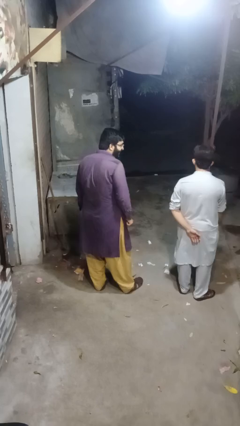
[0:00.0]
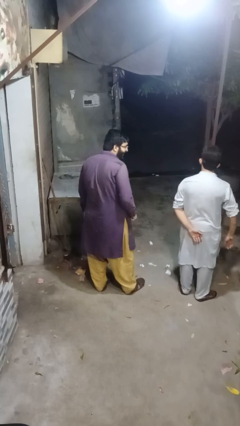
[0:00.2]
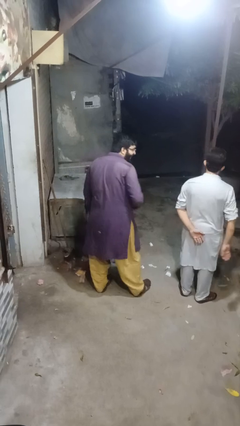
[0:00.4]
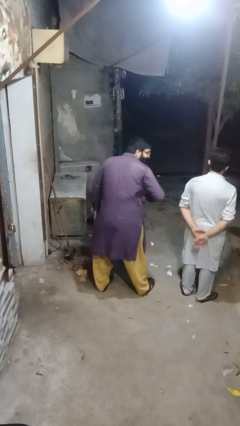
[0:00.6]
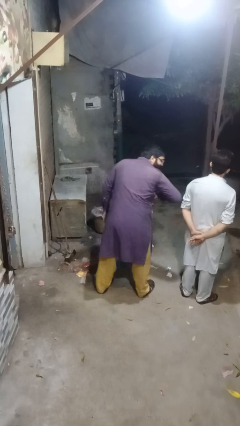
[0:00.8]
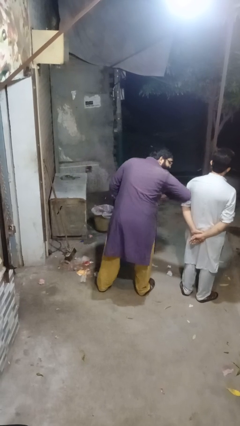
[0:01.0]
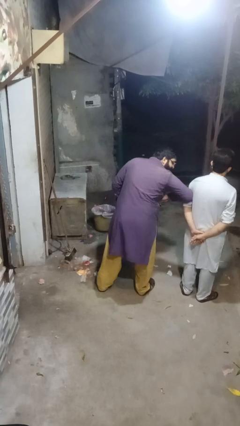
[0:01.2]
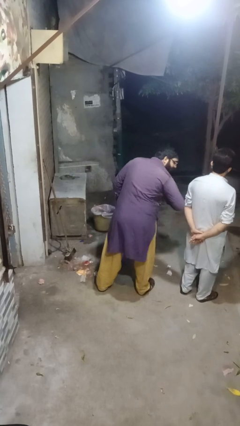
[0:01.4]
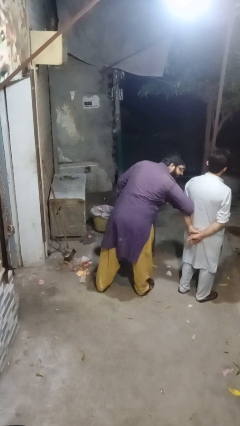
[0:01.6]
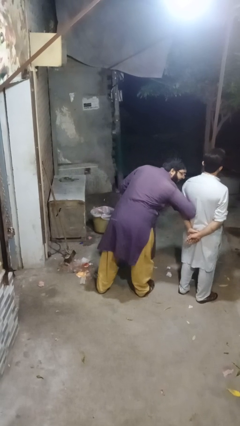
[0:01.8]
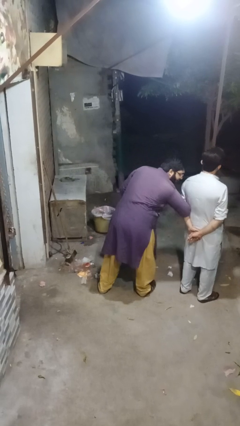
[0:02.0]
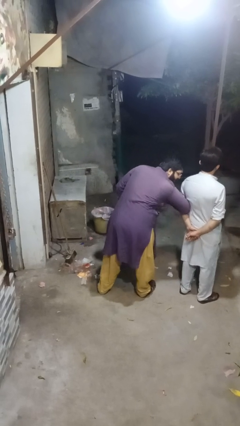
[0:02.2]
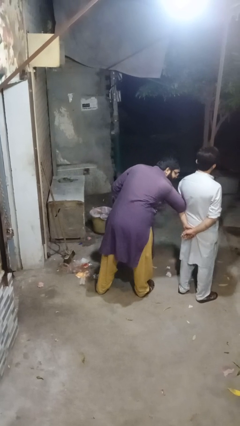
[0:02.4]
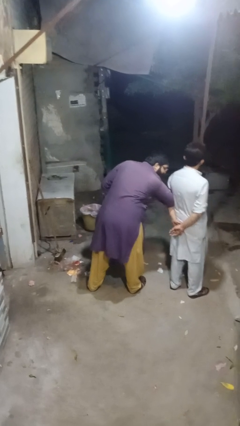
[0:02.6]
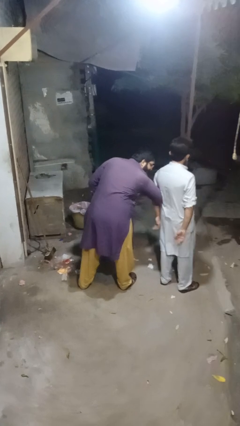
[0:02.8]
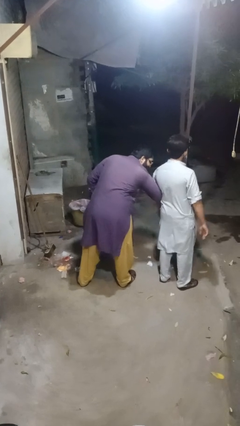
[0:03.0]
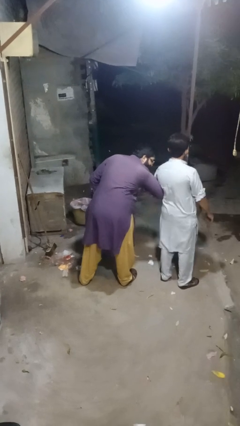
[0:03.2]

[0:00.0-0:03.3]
person nudges person with elbow

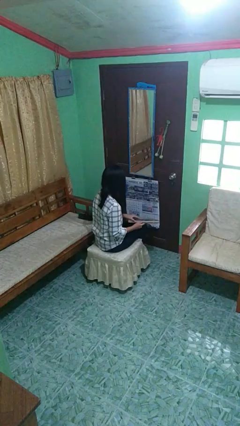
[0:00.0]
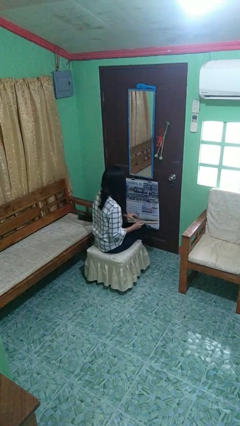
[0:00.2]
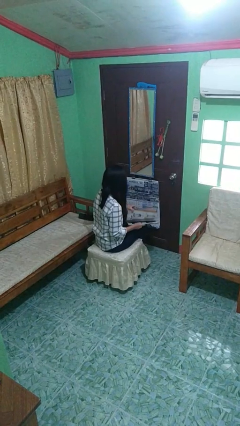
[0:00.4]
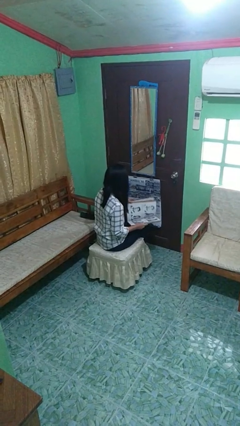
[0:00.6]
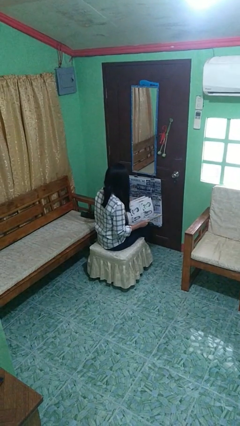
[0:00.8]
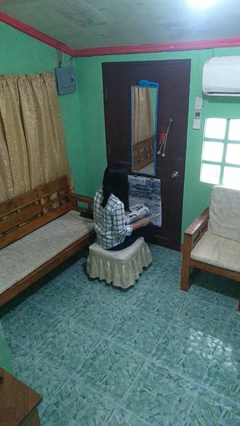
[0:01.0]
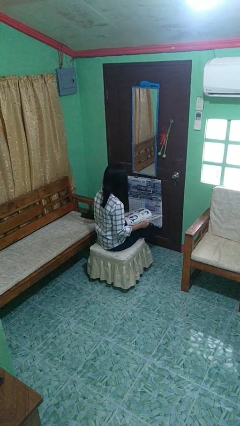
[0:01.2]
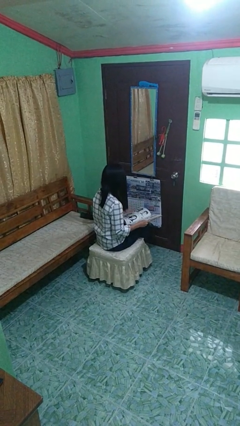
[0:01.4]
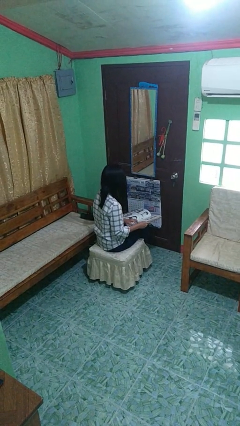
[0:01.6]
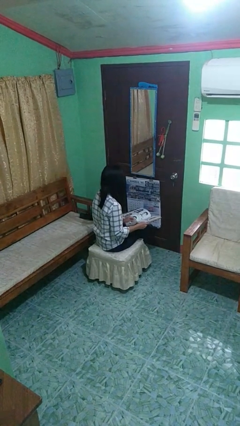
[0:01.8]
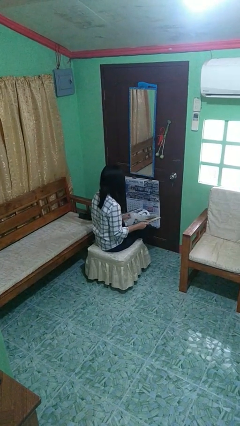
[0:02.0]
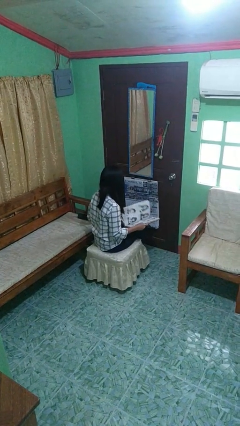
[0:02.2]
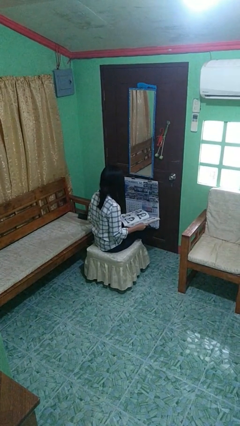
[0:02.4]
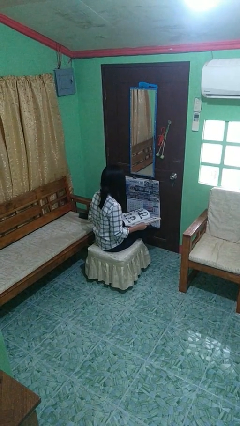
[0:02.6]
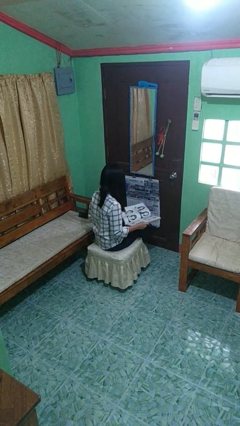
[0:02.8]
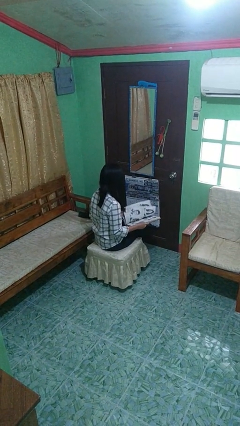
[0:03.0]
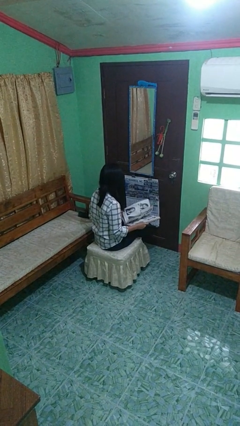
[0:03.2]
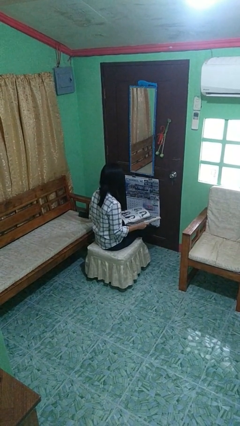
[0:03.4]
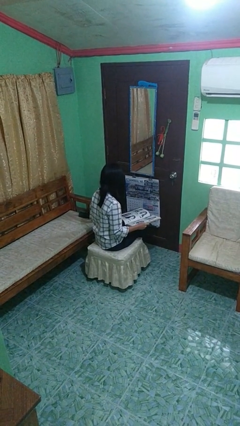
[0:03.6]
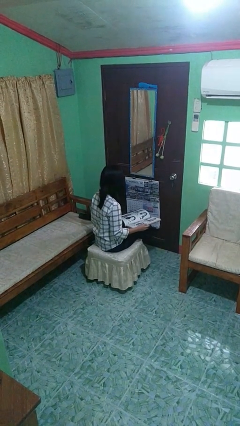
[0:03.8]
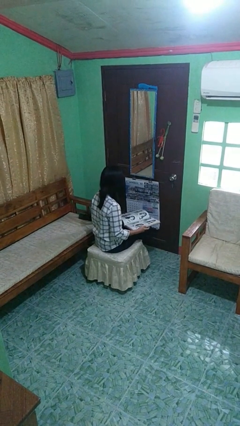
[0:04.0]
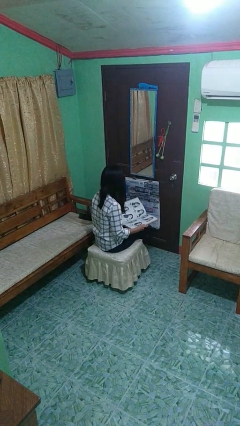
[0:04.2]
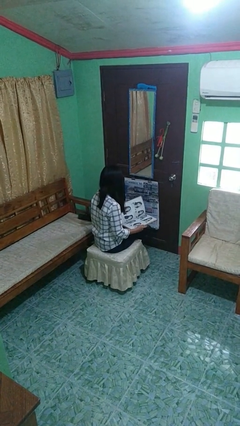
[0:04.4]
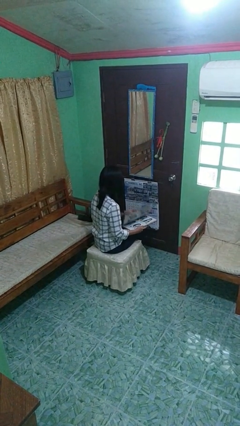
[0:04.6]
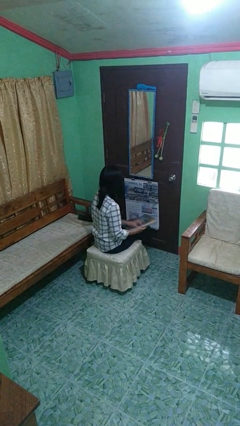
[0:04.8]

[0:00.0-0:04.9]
person reads book

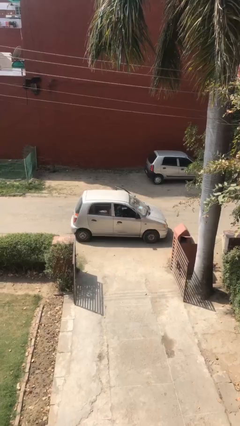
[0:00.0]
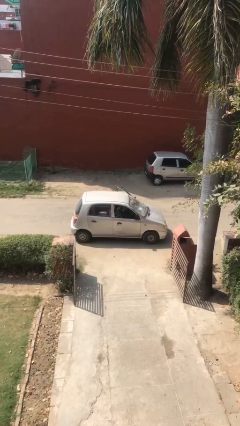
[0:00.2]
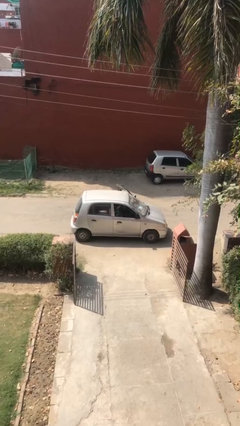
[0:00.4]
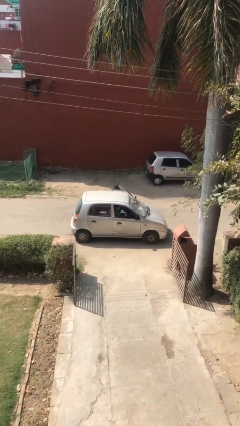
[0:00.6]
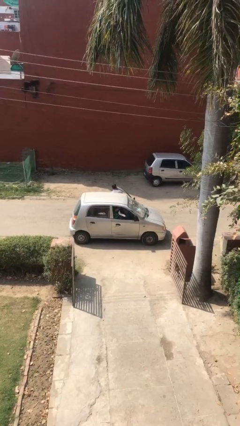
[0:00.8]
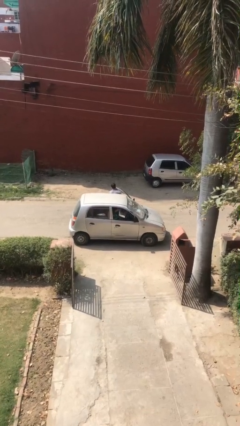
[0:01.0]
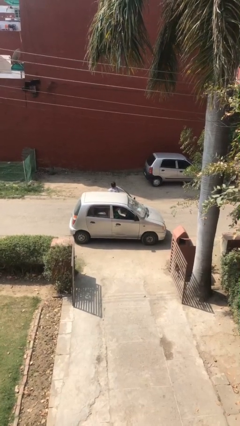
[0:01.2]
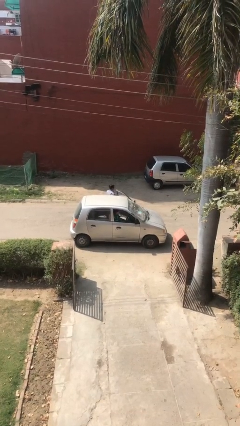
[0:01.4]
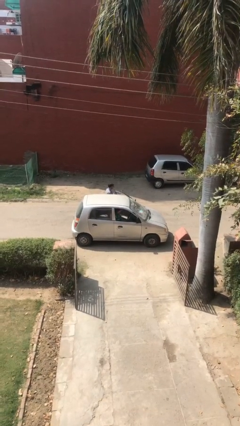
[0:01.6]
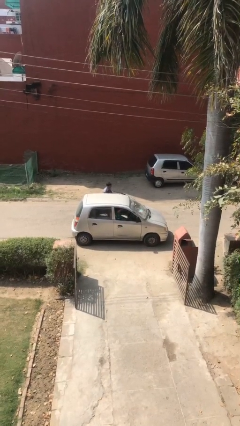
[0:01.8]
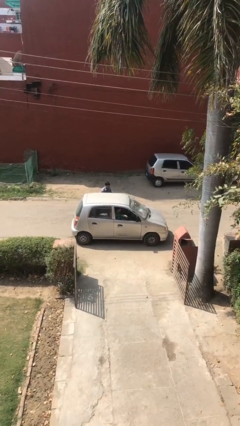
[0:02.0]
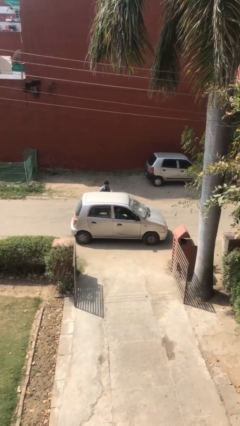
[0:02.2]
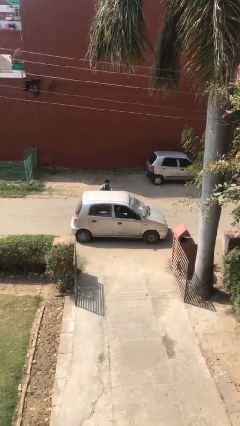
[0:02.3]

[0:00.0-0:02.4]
car drops off person

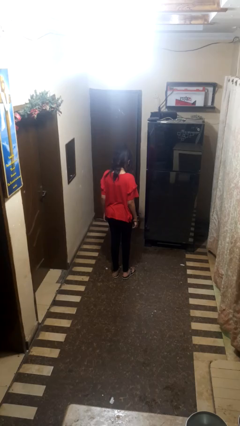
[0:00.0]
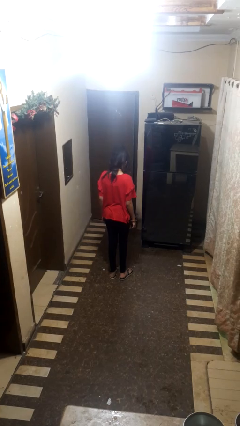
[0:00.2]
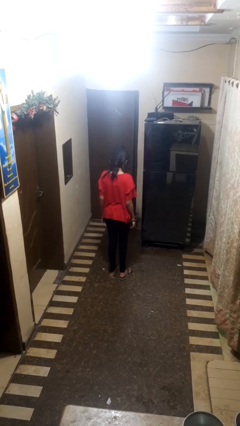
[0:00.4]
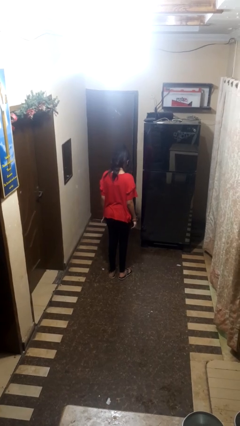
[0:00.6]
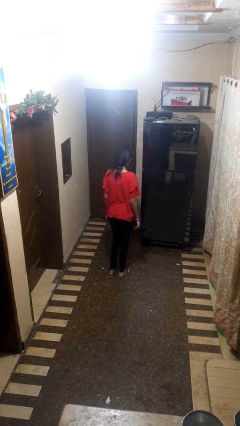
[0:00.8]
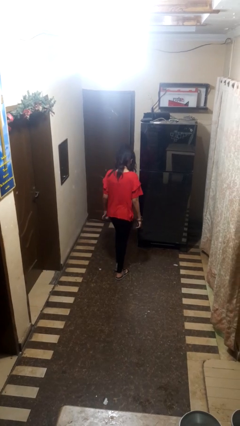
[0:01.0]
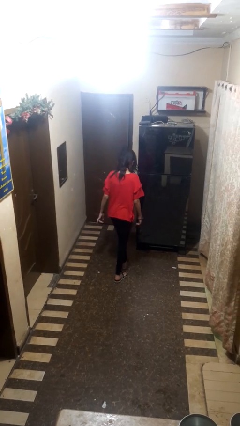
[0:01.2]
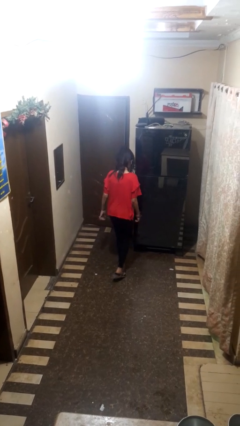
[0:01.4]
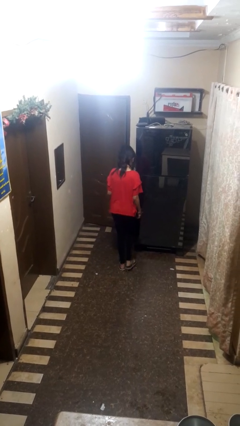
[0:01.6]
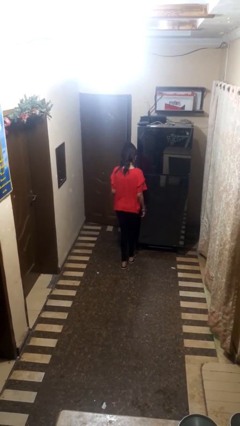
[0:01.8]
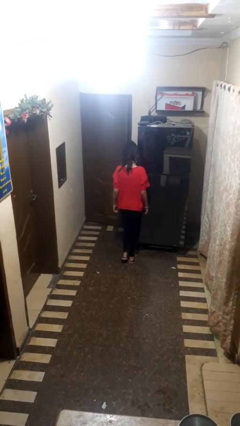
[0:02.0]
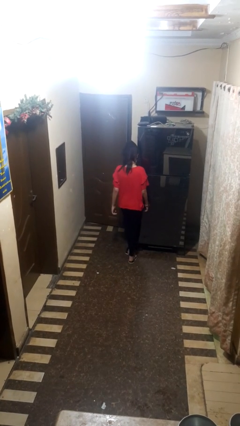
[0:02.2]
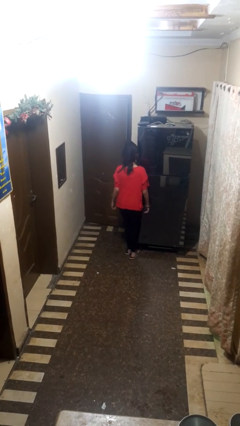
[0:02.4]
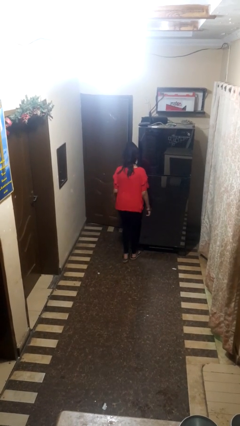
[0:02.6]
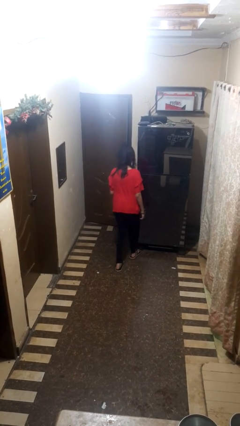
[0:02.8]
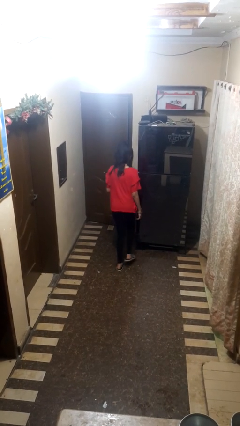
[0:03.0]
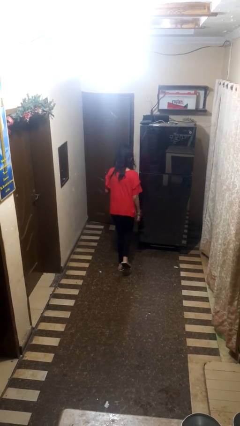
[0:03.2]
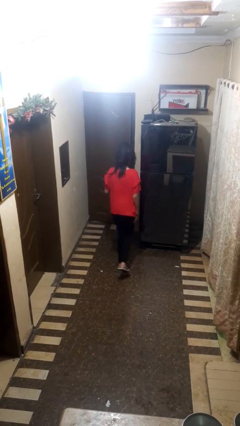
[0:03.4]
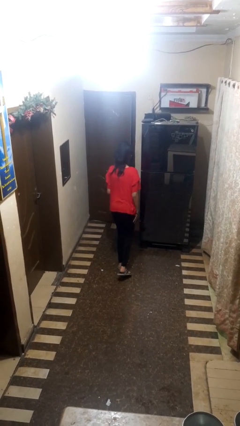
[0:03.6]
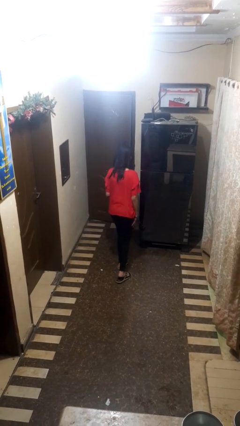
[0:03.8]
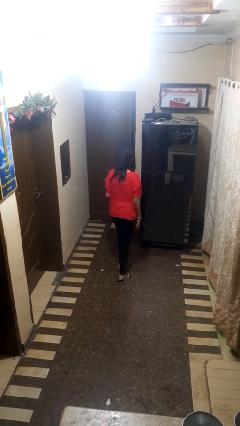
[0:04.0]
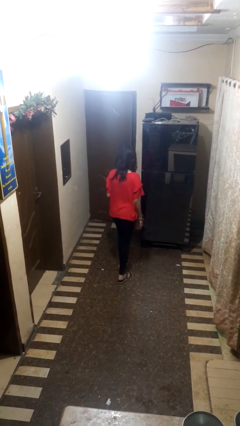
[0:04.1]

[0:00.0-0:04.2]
person stubs toe

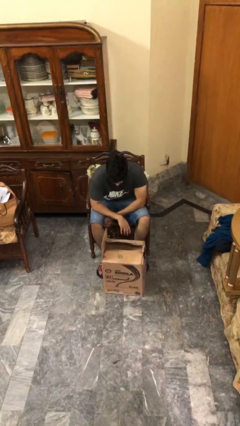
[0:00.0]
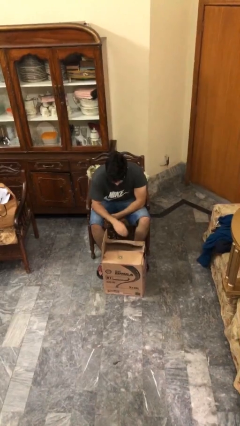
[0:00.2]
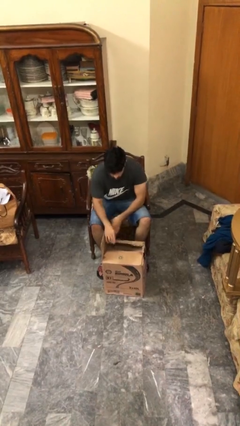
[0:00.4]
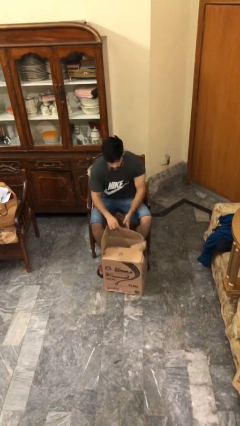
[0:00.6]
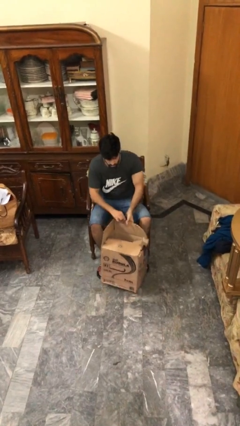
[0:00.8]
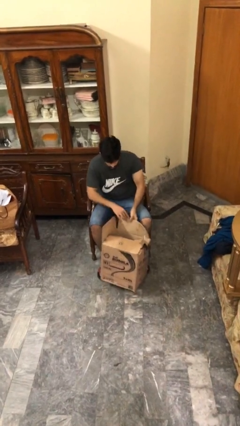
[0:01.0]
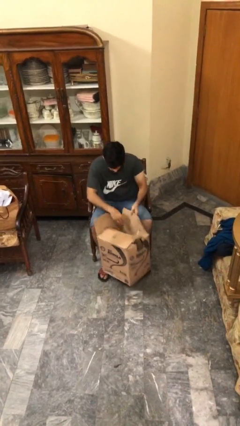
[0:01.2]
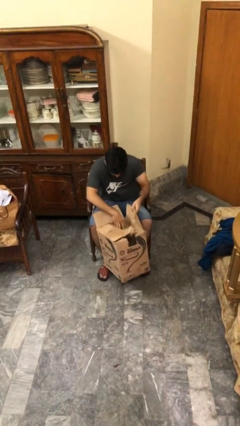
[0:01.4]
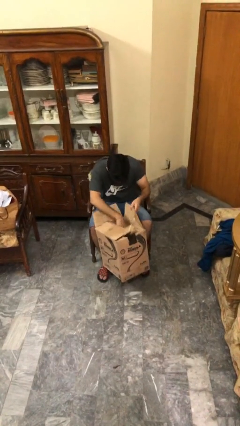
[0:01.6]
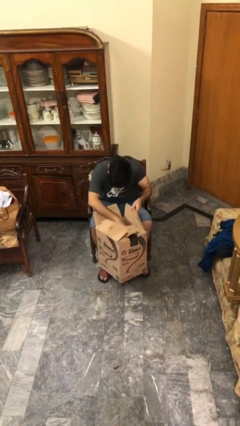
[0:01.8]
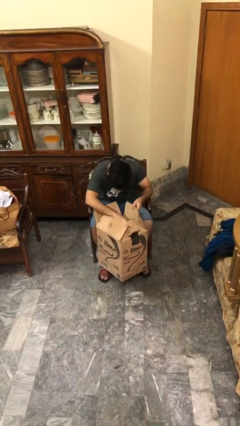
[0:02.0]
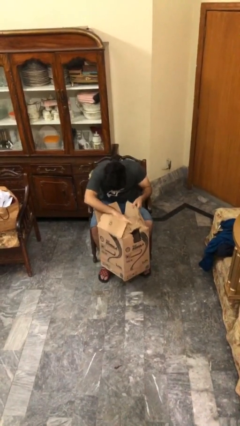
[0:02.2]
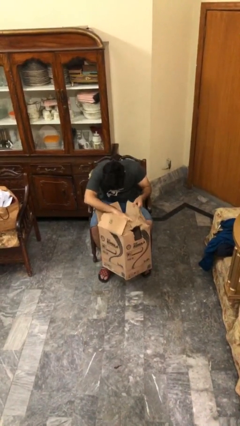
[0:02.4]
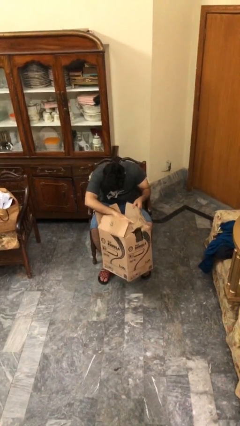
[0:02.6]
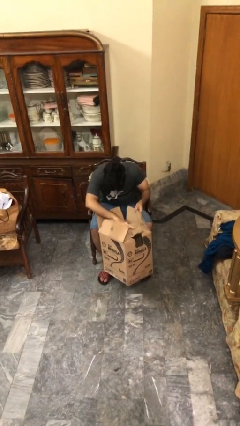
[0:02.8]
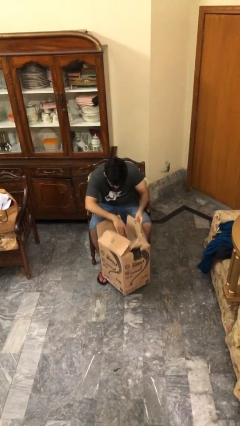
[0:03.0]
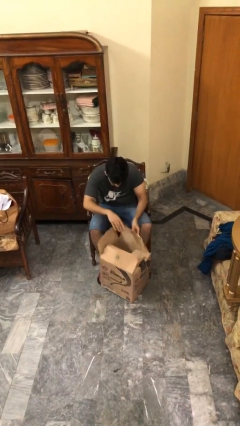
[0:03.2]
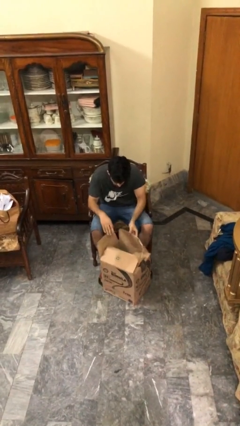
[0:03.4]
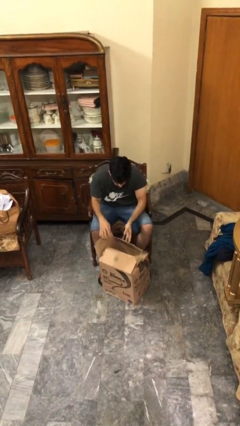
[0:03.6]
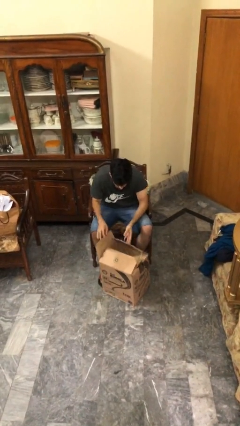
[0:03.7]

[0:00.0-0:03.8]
person searches in box
